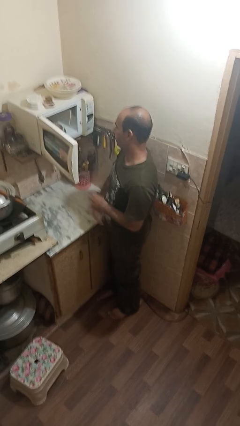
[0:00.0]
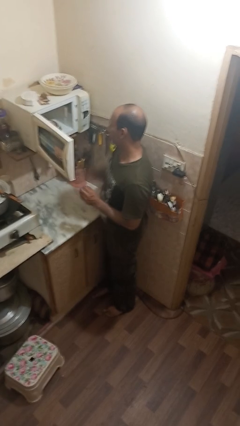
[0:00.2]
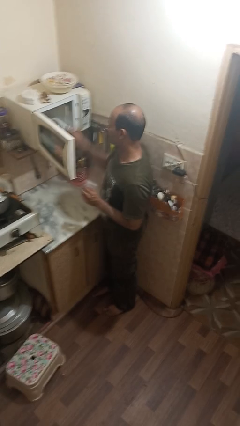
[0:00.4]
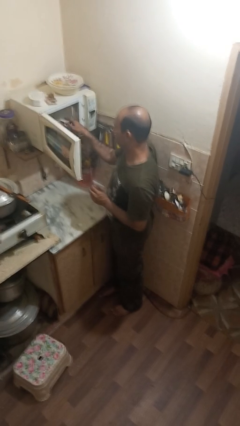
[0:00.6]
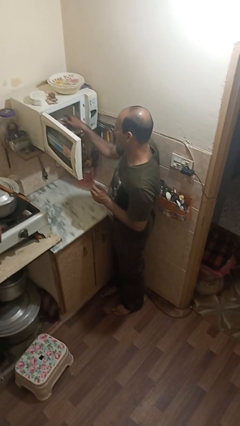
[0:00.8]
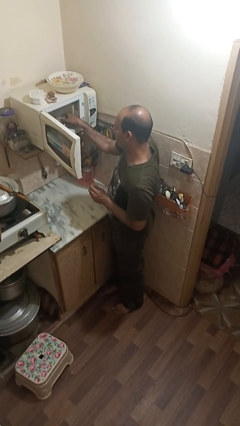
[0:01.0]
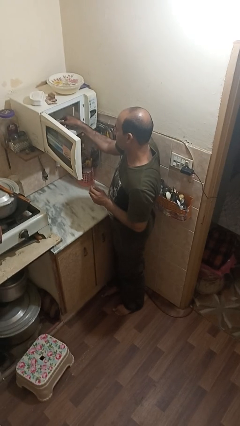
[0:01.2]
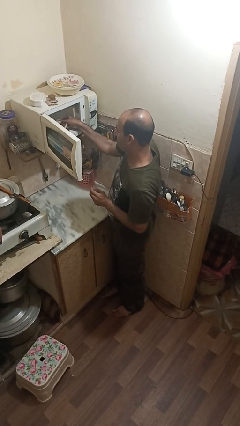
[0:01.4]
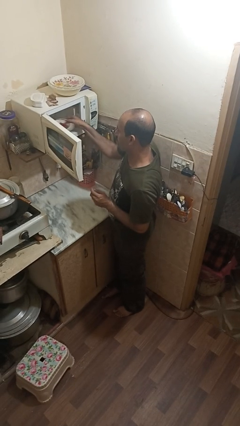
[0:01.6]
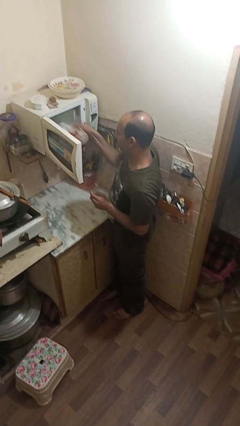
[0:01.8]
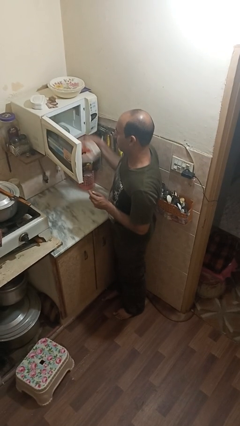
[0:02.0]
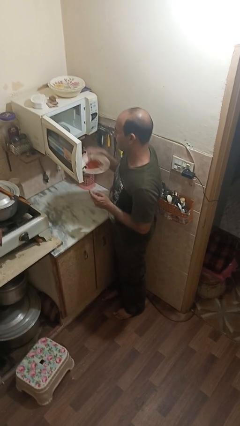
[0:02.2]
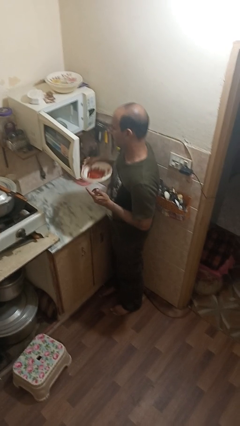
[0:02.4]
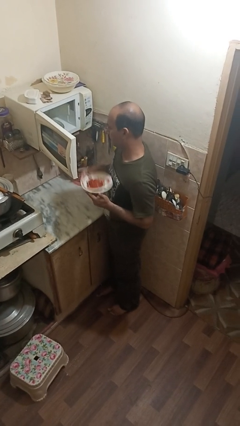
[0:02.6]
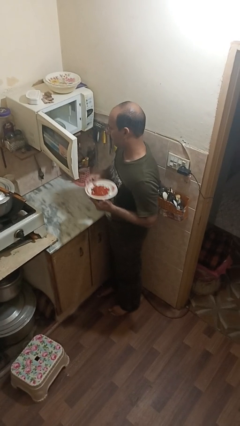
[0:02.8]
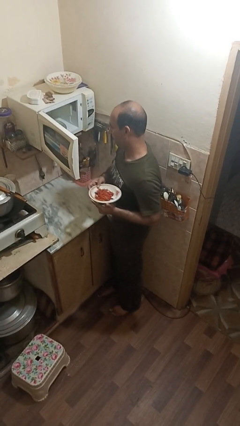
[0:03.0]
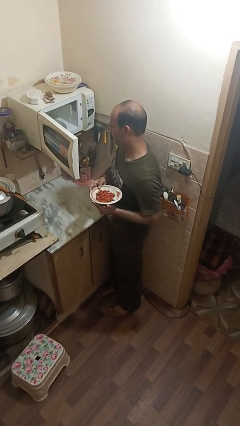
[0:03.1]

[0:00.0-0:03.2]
person takes object from microwave

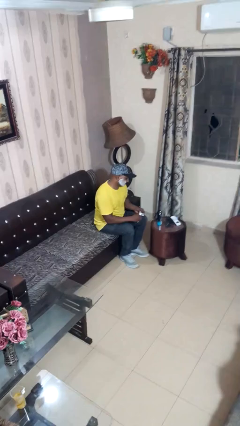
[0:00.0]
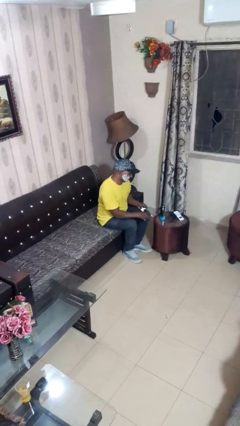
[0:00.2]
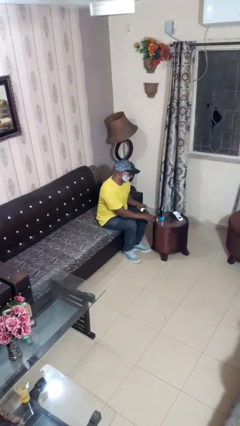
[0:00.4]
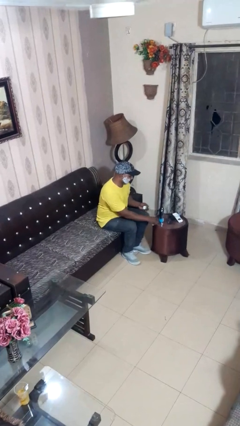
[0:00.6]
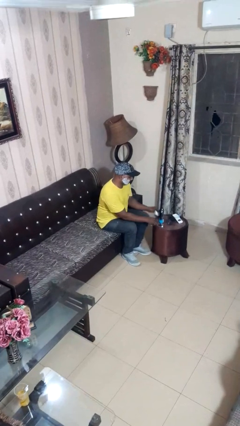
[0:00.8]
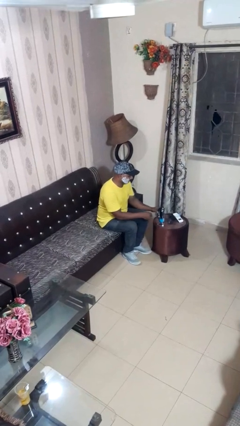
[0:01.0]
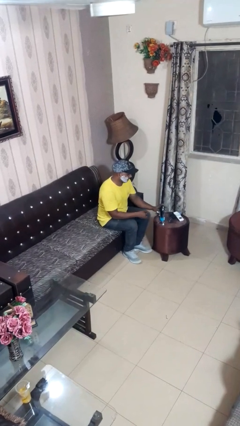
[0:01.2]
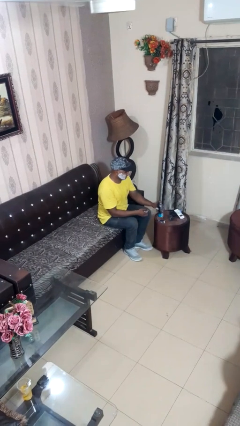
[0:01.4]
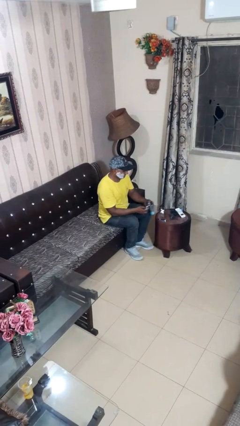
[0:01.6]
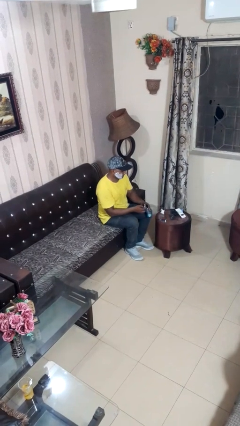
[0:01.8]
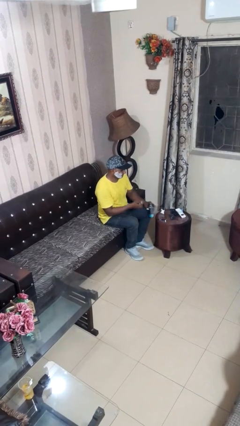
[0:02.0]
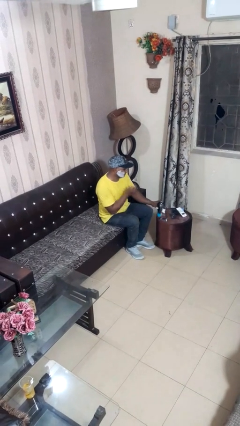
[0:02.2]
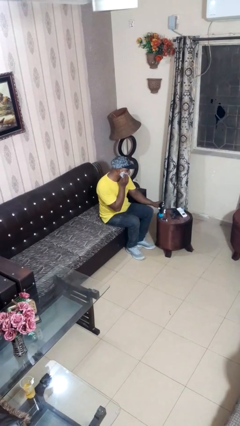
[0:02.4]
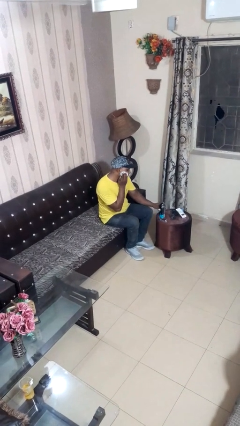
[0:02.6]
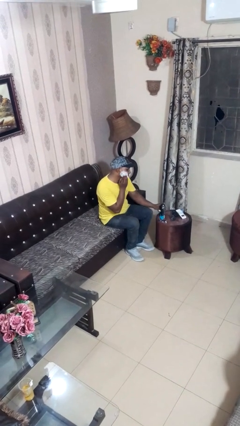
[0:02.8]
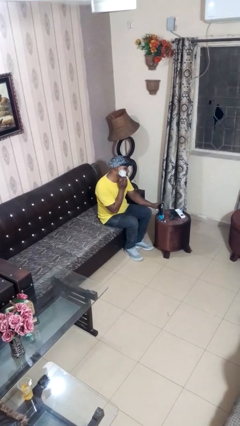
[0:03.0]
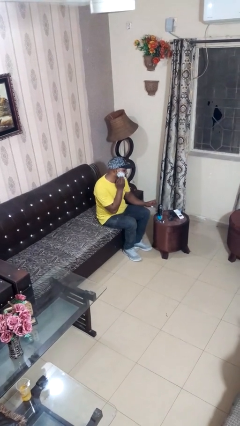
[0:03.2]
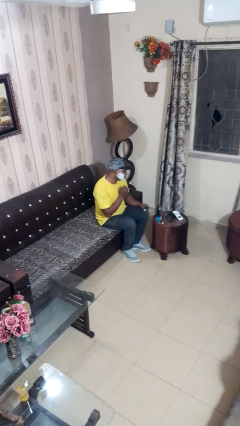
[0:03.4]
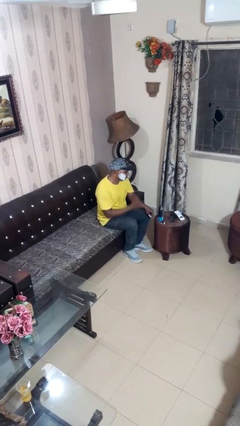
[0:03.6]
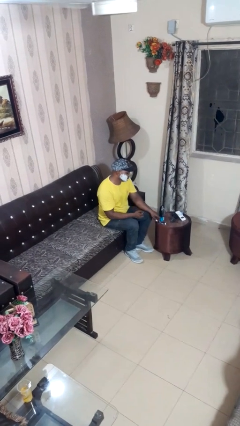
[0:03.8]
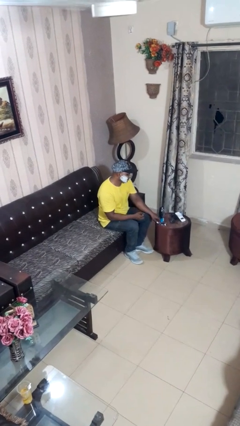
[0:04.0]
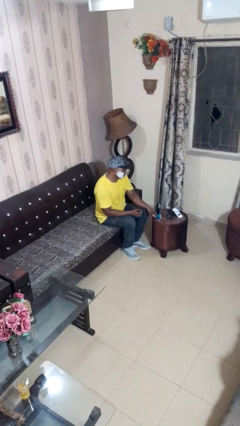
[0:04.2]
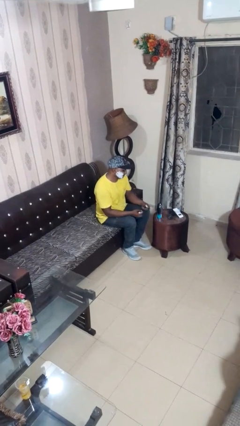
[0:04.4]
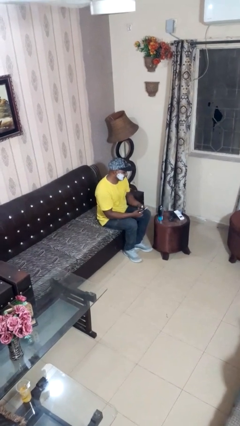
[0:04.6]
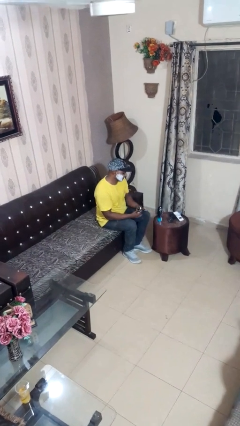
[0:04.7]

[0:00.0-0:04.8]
person applies shaving cream

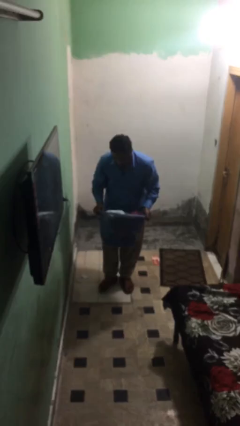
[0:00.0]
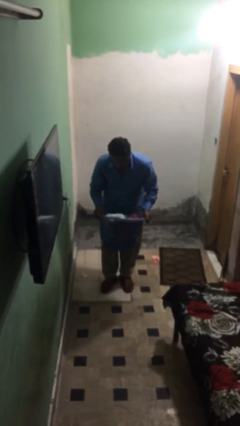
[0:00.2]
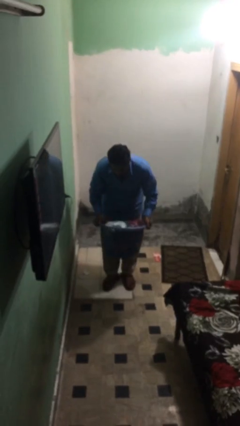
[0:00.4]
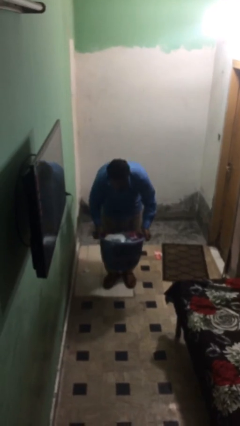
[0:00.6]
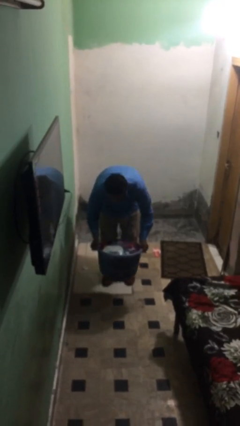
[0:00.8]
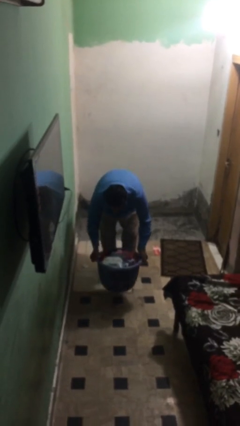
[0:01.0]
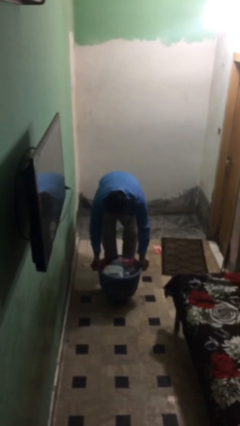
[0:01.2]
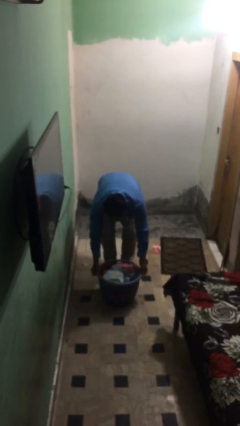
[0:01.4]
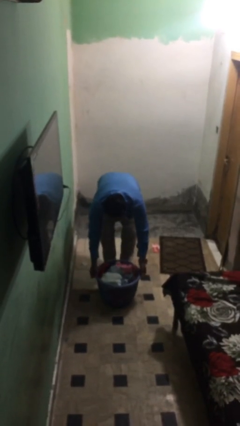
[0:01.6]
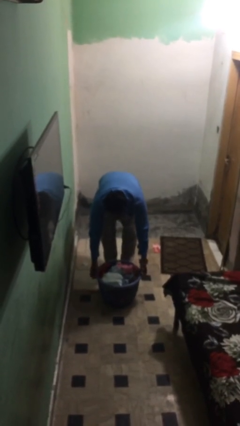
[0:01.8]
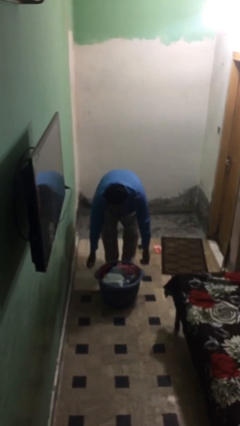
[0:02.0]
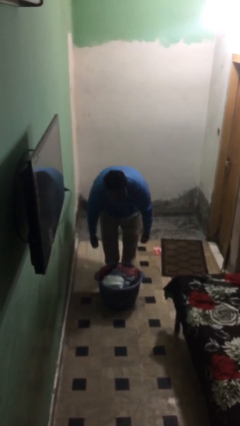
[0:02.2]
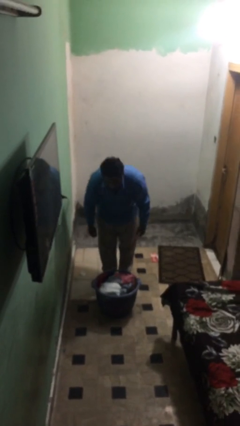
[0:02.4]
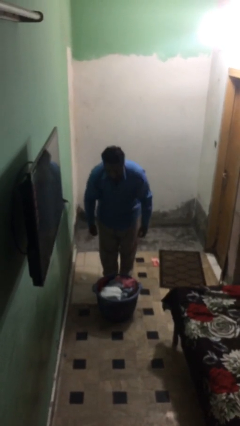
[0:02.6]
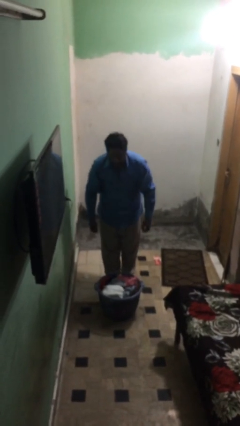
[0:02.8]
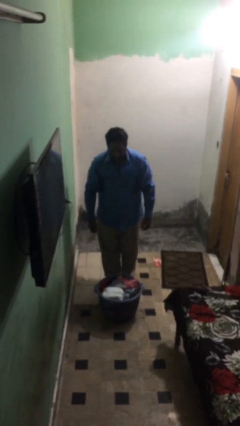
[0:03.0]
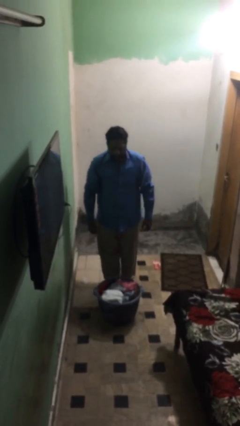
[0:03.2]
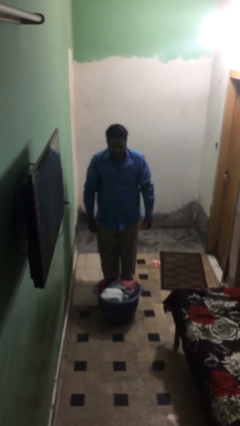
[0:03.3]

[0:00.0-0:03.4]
person puts down object on floor

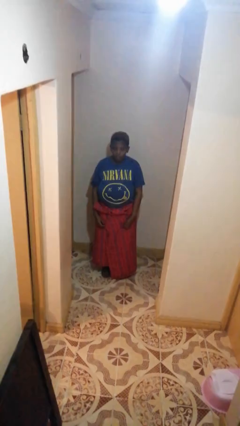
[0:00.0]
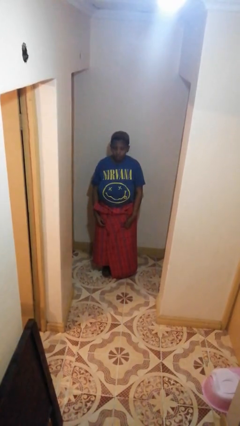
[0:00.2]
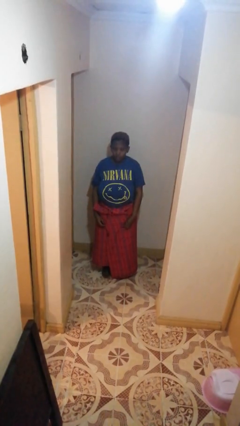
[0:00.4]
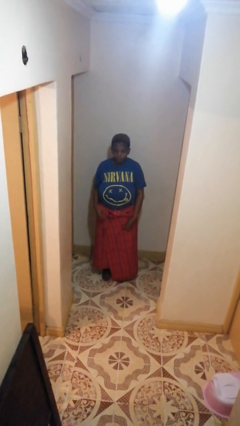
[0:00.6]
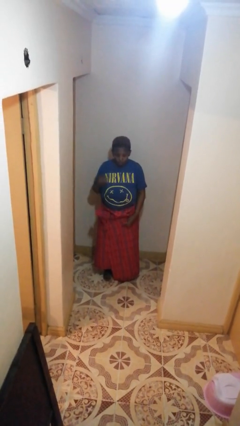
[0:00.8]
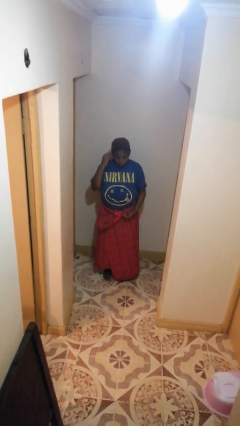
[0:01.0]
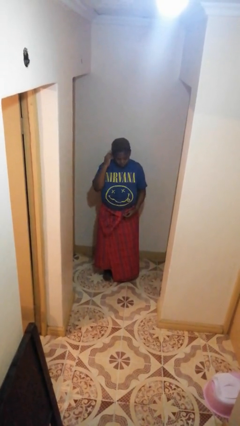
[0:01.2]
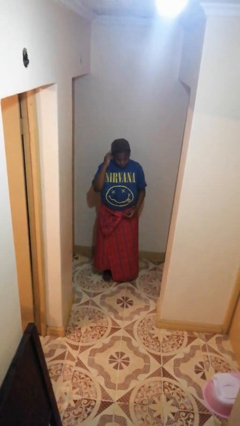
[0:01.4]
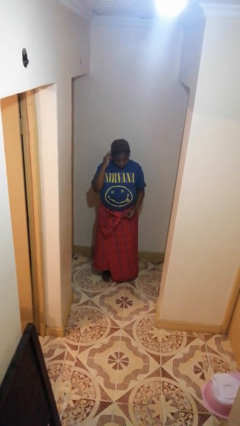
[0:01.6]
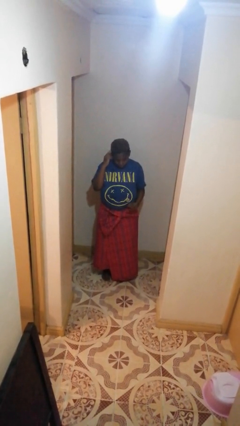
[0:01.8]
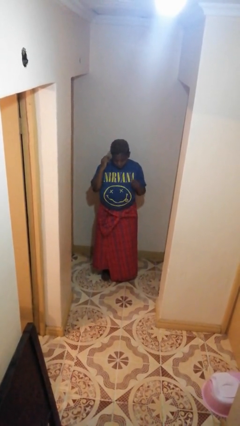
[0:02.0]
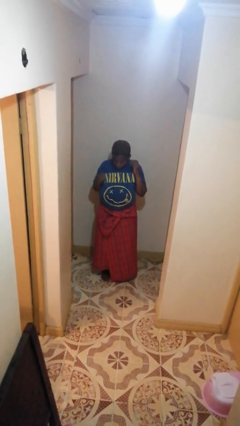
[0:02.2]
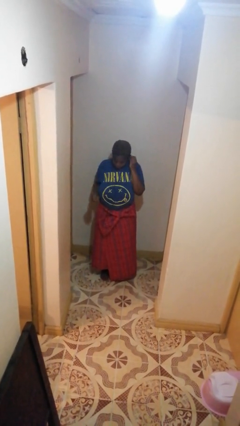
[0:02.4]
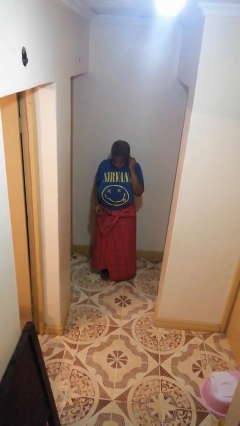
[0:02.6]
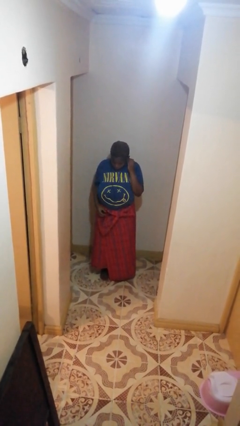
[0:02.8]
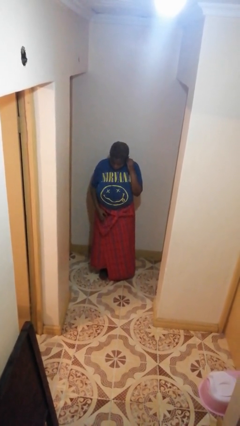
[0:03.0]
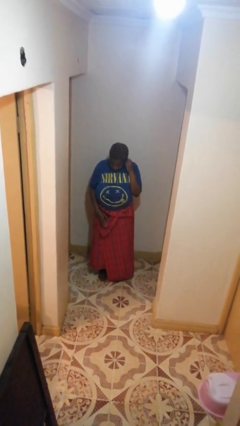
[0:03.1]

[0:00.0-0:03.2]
person puts on headphones

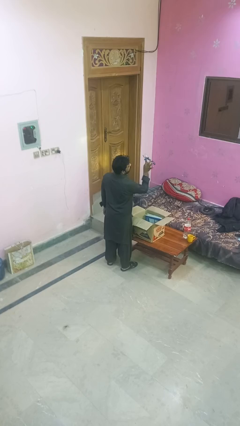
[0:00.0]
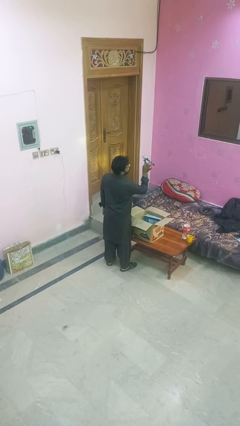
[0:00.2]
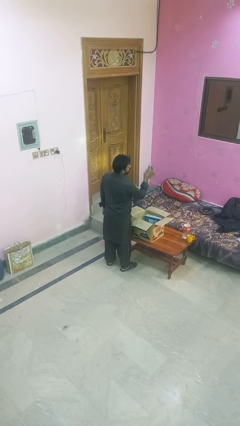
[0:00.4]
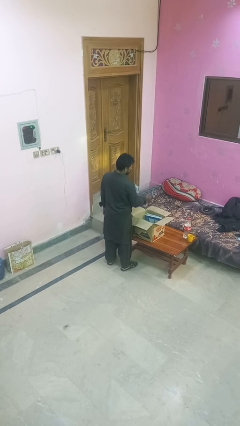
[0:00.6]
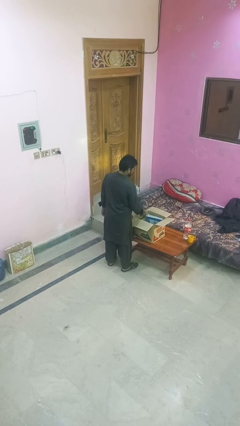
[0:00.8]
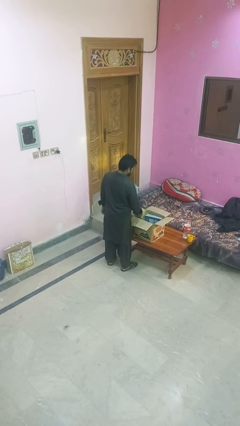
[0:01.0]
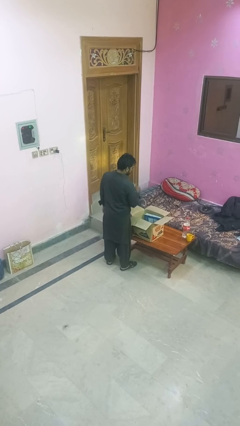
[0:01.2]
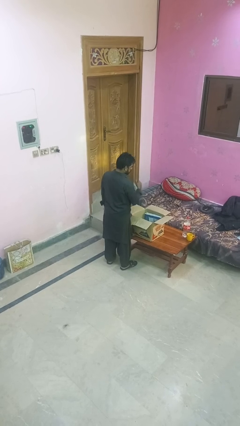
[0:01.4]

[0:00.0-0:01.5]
person puts object into box

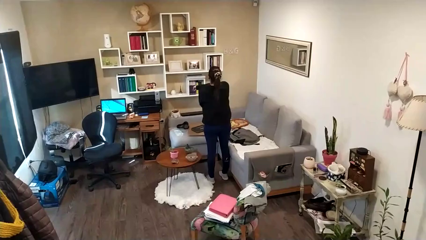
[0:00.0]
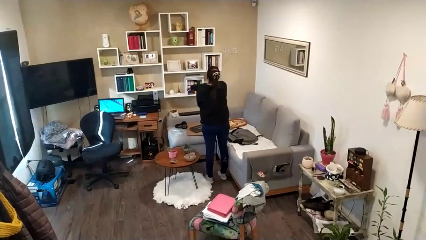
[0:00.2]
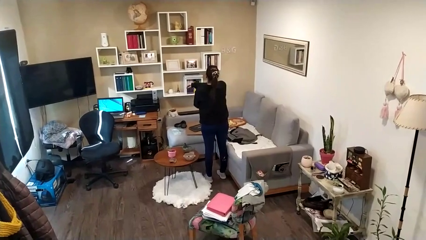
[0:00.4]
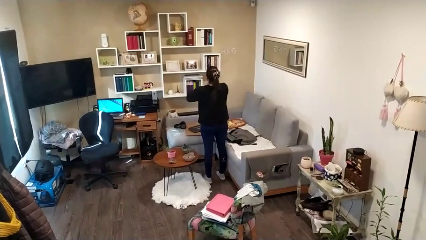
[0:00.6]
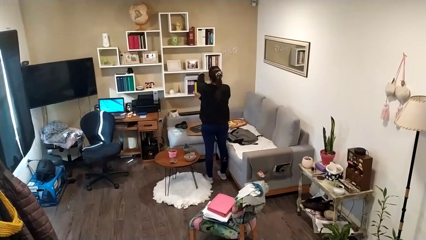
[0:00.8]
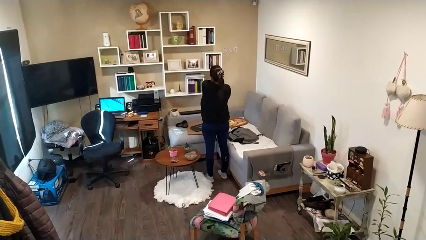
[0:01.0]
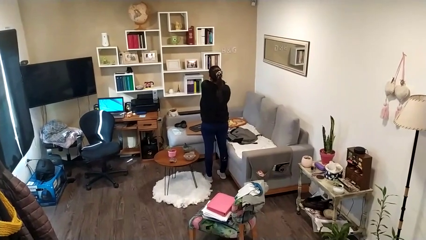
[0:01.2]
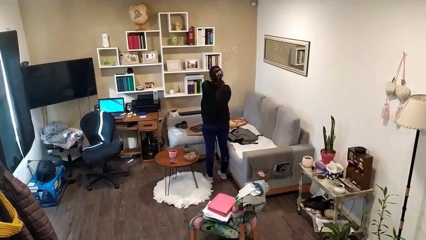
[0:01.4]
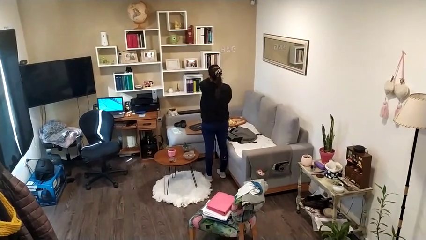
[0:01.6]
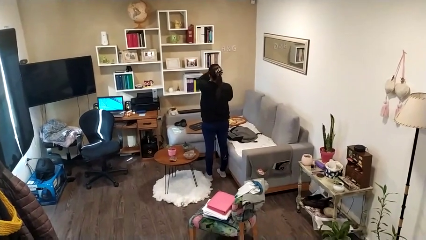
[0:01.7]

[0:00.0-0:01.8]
person stretches arms to side
